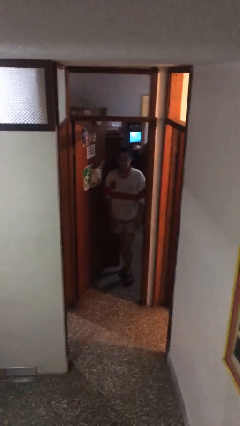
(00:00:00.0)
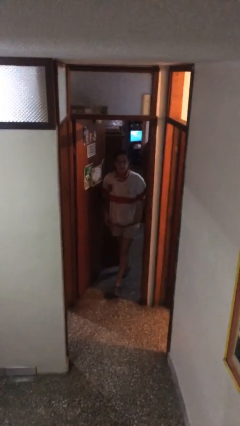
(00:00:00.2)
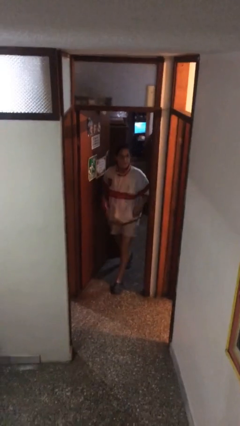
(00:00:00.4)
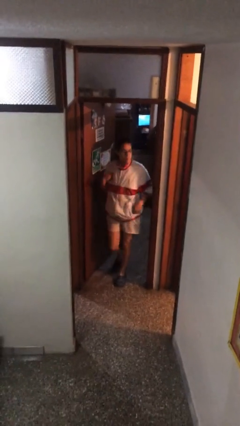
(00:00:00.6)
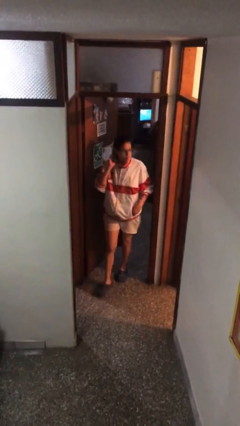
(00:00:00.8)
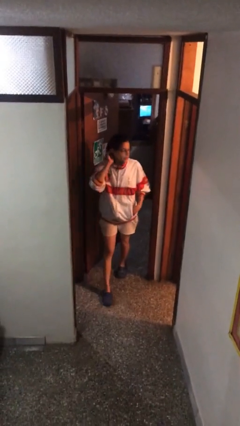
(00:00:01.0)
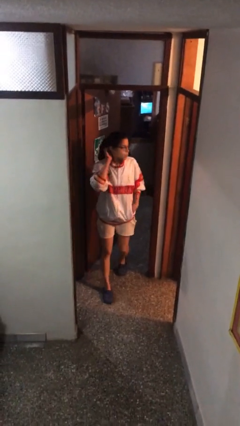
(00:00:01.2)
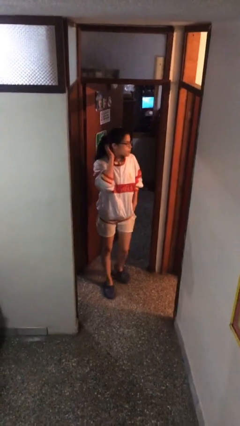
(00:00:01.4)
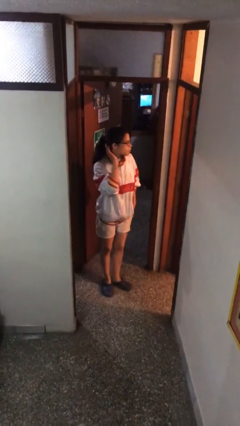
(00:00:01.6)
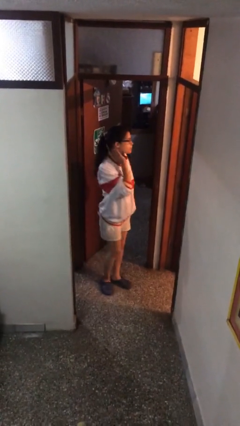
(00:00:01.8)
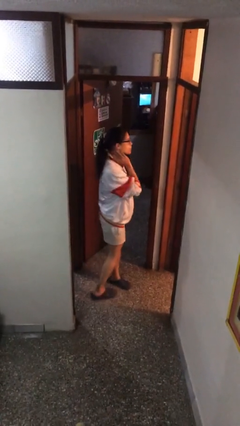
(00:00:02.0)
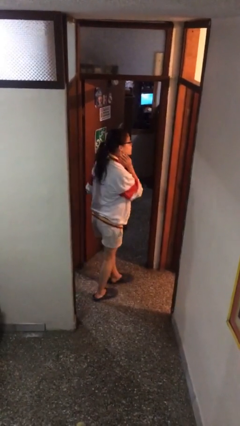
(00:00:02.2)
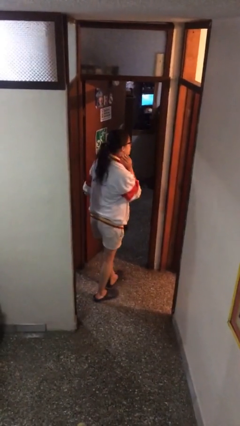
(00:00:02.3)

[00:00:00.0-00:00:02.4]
person enters scene through structure

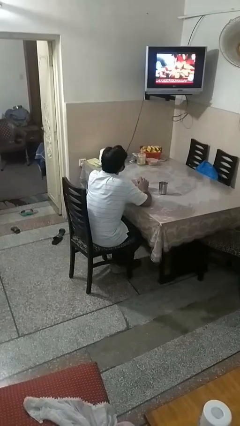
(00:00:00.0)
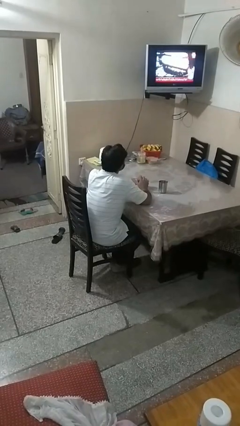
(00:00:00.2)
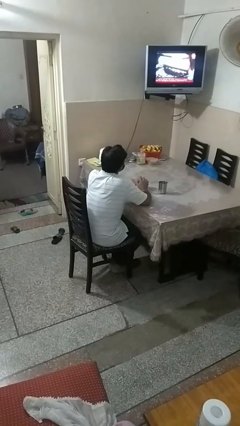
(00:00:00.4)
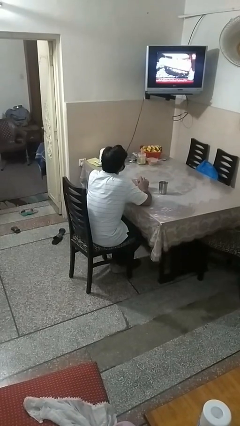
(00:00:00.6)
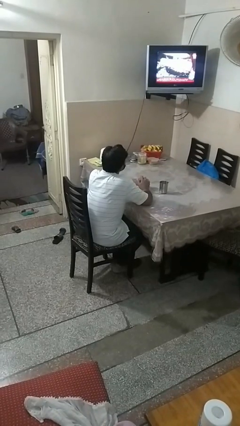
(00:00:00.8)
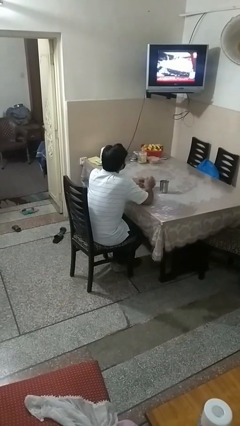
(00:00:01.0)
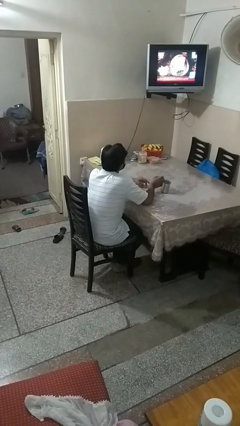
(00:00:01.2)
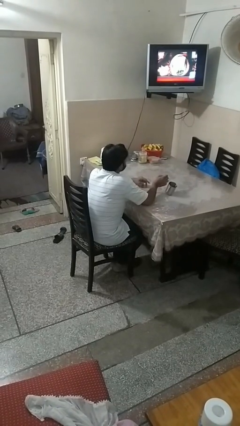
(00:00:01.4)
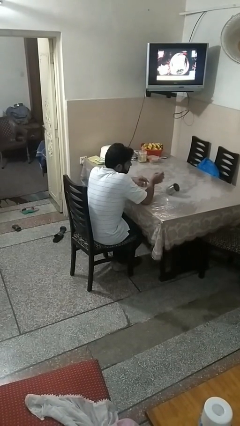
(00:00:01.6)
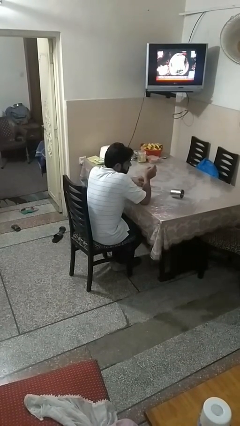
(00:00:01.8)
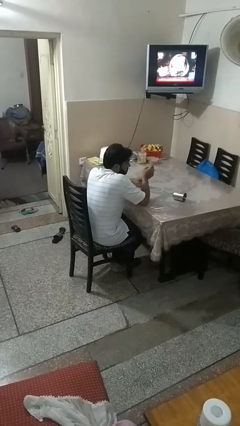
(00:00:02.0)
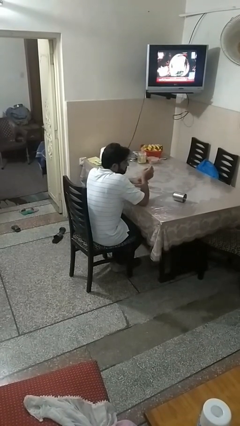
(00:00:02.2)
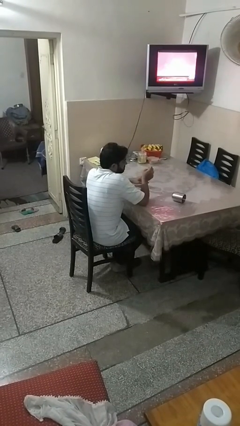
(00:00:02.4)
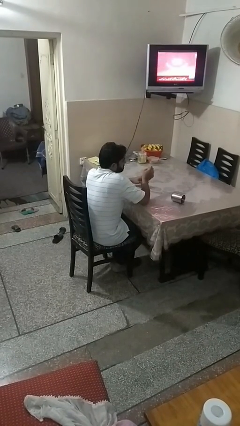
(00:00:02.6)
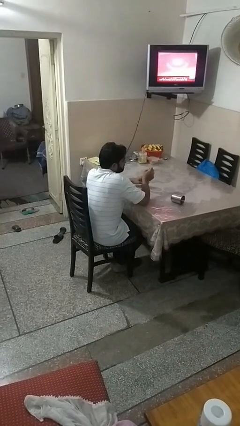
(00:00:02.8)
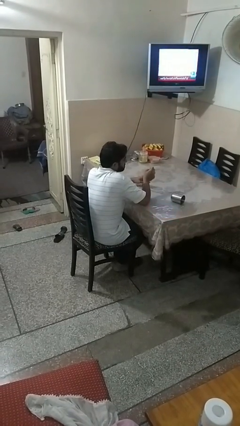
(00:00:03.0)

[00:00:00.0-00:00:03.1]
person knocks over glass

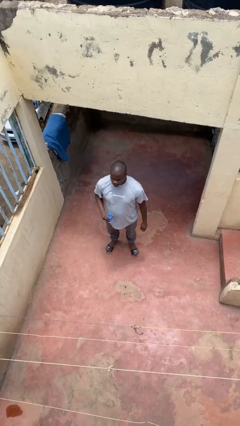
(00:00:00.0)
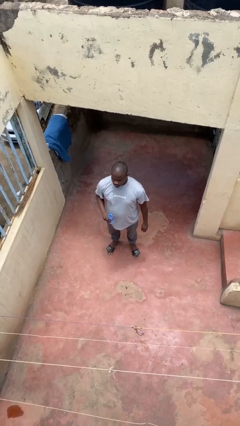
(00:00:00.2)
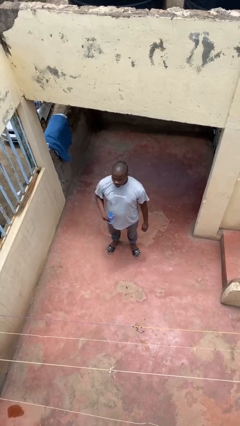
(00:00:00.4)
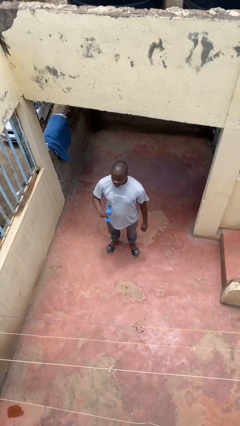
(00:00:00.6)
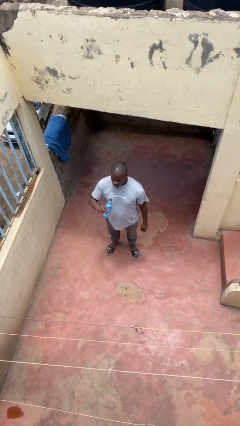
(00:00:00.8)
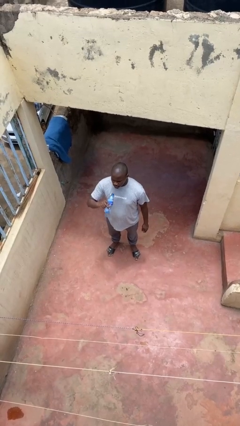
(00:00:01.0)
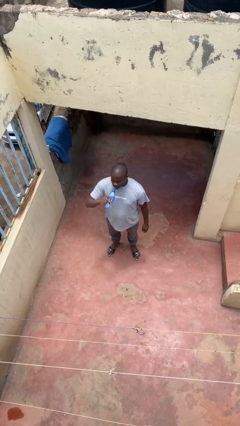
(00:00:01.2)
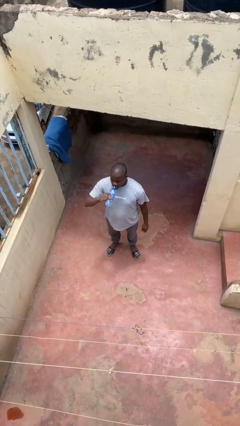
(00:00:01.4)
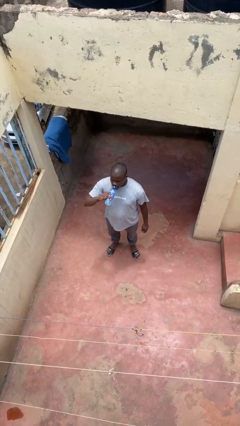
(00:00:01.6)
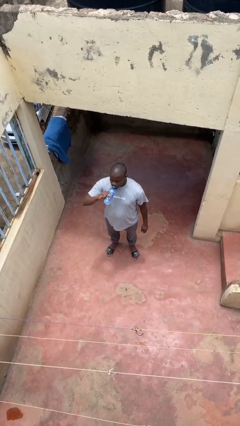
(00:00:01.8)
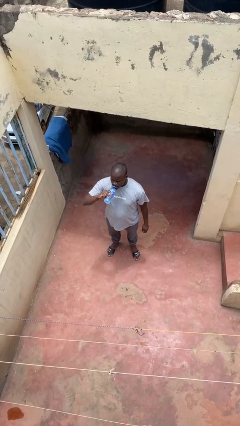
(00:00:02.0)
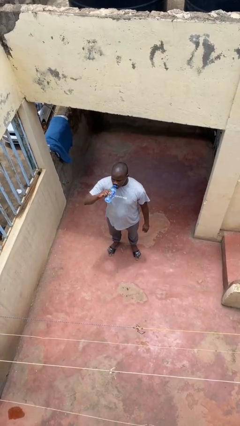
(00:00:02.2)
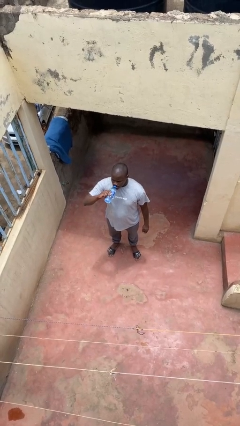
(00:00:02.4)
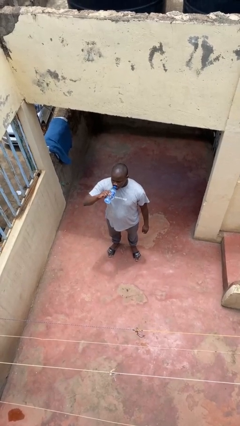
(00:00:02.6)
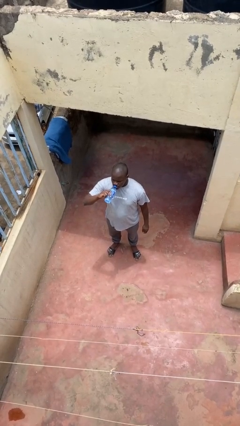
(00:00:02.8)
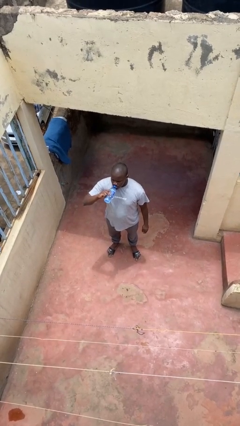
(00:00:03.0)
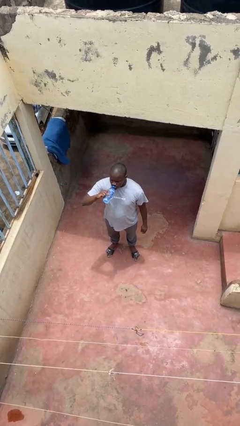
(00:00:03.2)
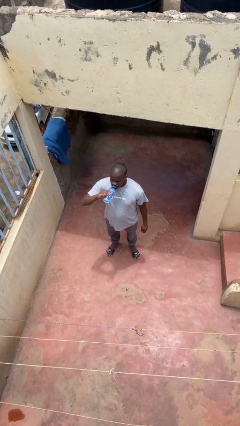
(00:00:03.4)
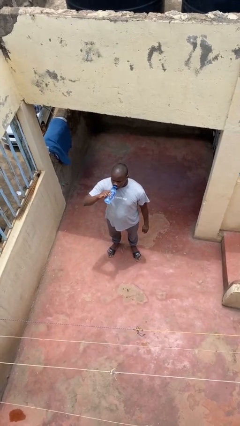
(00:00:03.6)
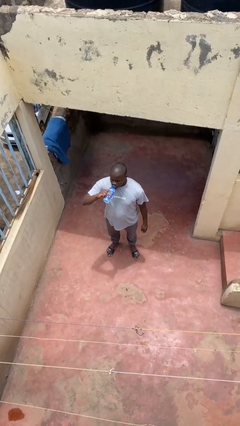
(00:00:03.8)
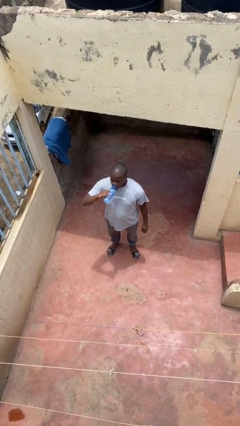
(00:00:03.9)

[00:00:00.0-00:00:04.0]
person drinks from bottle

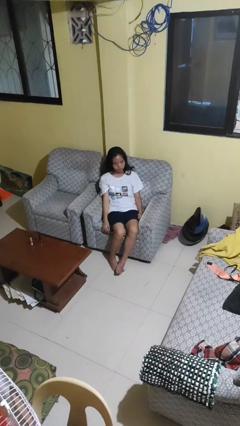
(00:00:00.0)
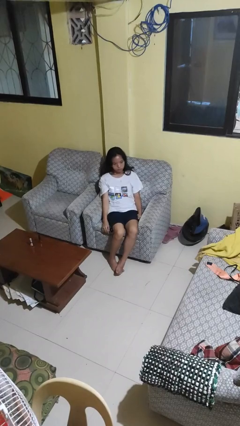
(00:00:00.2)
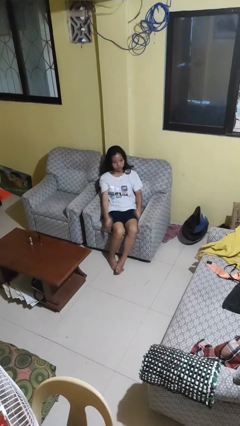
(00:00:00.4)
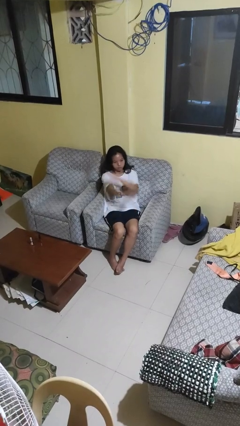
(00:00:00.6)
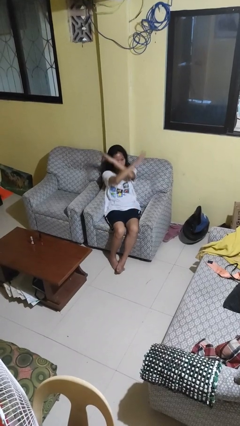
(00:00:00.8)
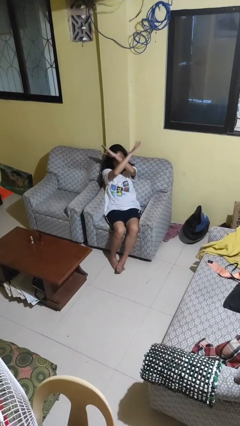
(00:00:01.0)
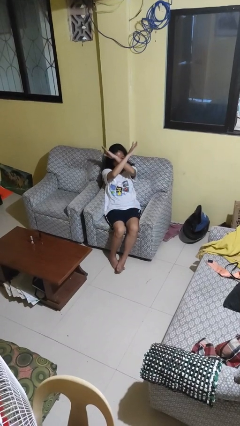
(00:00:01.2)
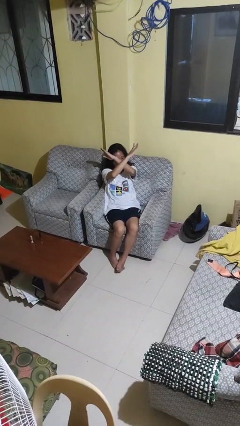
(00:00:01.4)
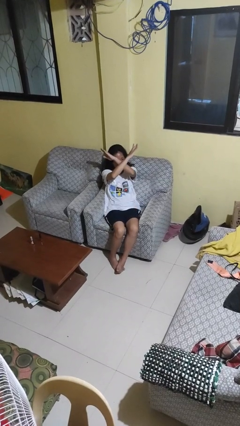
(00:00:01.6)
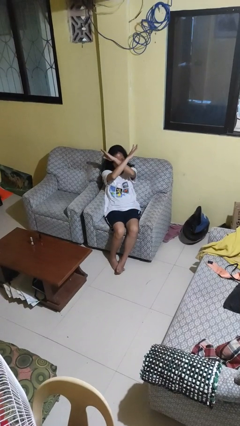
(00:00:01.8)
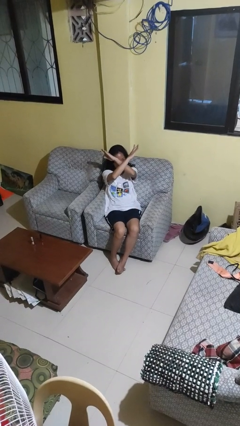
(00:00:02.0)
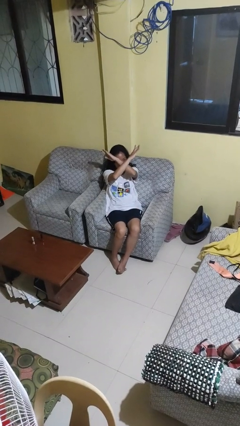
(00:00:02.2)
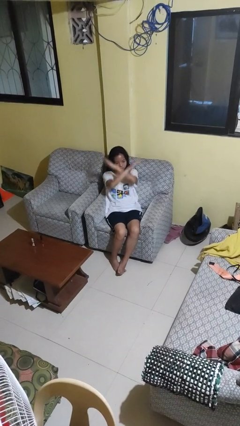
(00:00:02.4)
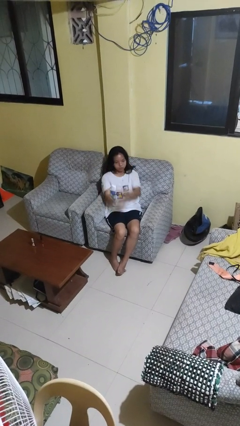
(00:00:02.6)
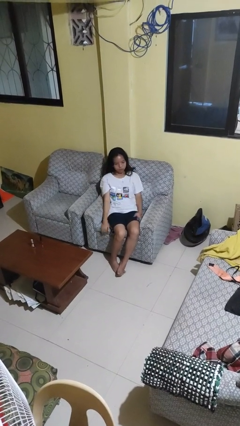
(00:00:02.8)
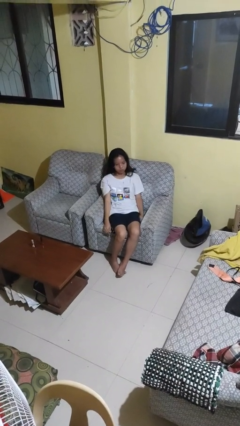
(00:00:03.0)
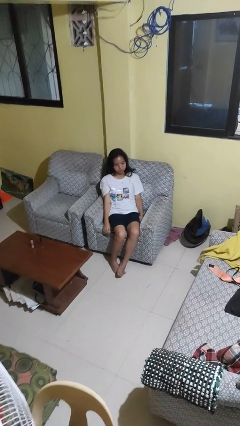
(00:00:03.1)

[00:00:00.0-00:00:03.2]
person gestures arms x

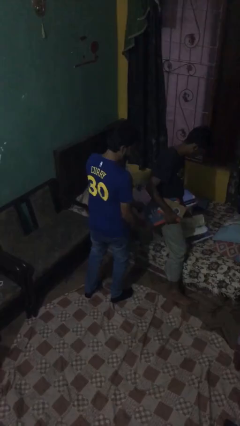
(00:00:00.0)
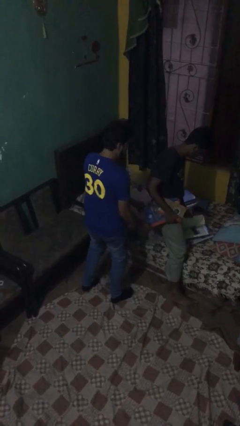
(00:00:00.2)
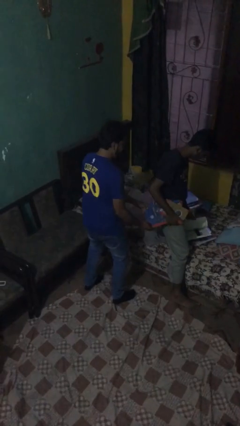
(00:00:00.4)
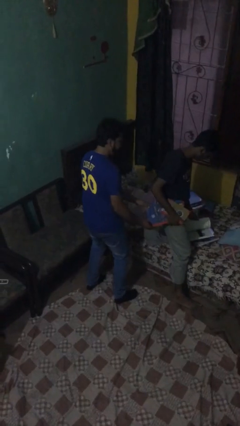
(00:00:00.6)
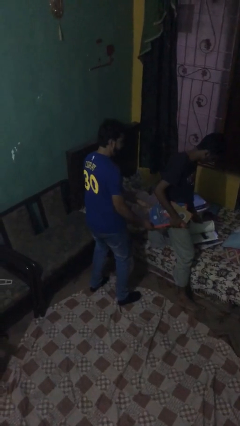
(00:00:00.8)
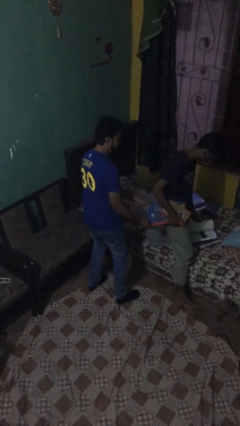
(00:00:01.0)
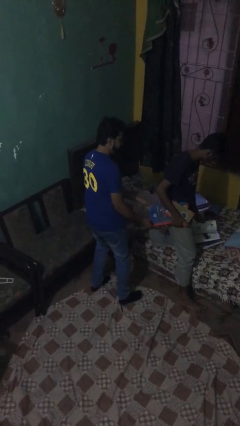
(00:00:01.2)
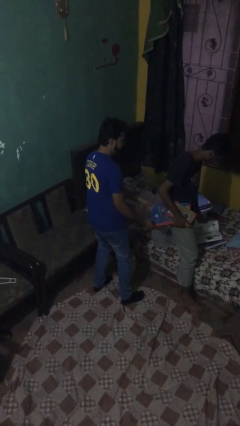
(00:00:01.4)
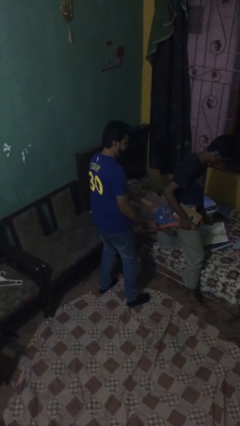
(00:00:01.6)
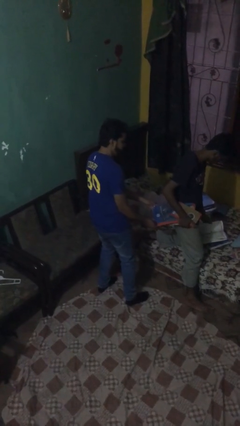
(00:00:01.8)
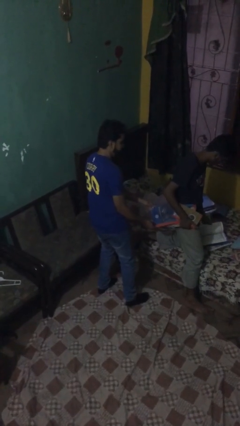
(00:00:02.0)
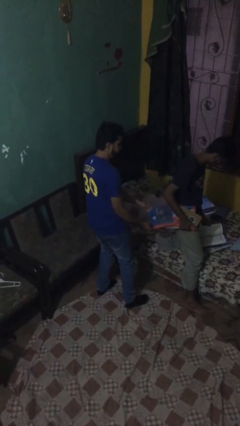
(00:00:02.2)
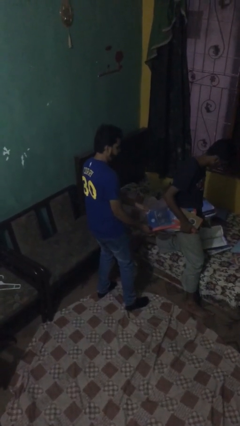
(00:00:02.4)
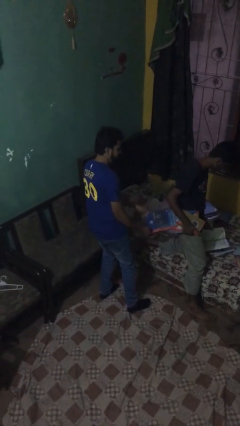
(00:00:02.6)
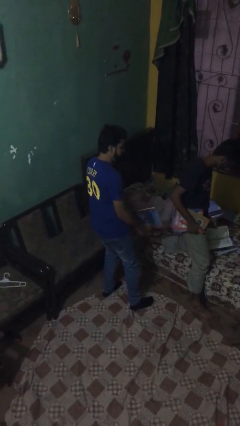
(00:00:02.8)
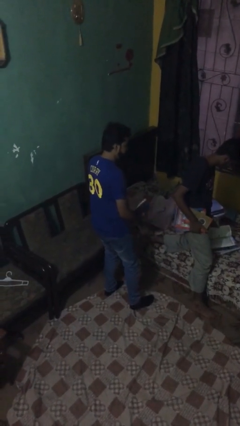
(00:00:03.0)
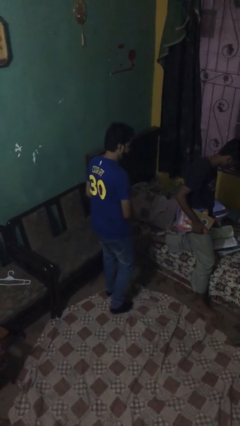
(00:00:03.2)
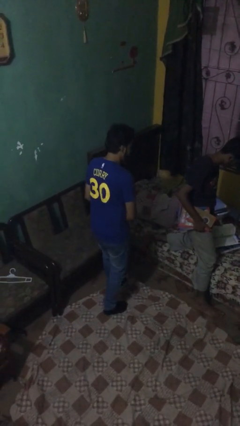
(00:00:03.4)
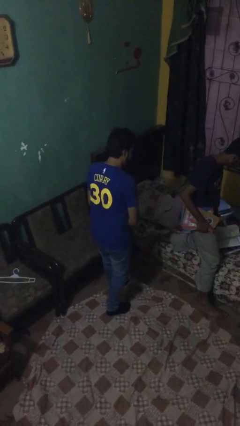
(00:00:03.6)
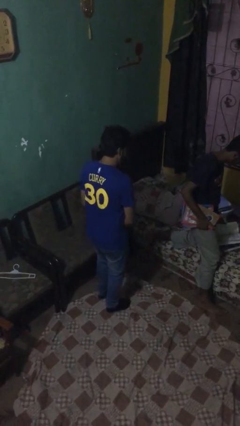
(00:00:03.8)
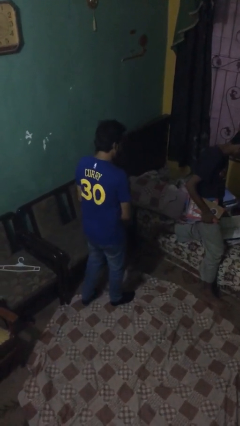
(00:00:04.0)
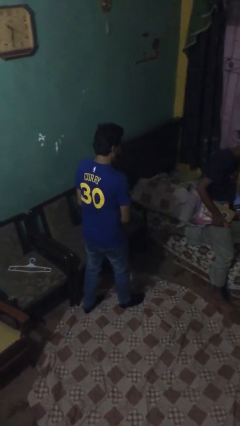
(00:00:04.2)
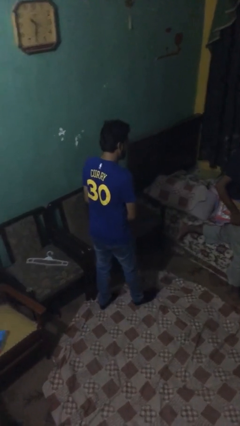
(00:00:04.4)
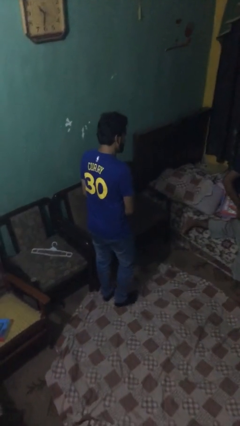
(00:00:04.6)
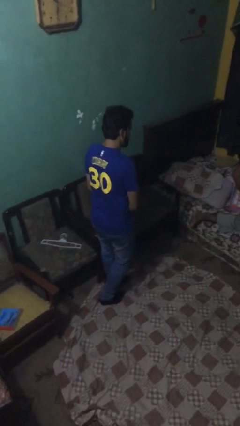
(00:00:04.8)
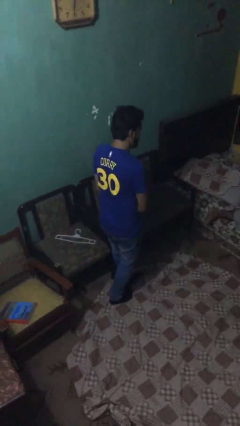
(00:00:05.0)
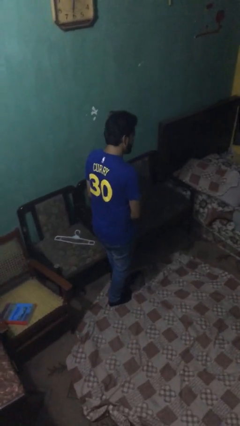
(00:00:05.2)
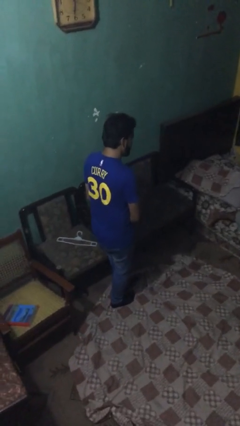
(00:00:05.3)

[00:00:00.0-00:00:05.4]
person steals object from person
